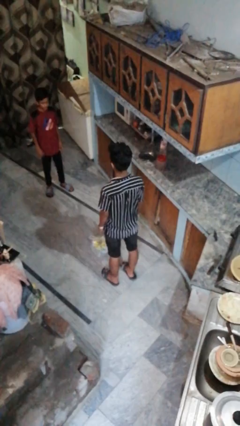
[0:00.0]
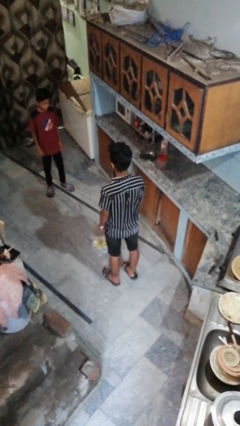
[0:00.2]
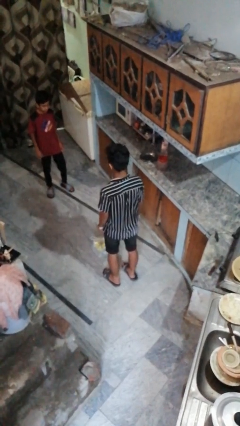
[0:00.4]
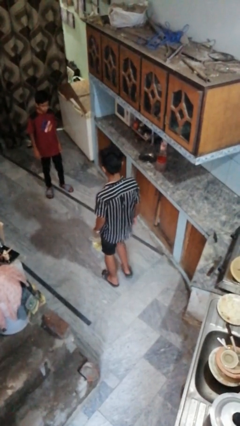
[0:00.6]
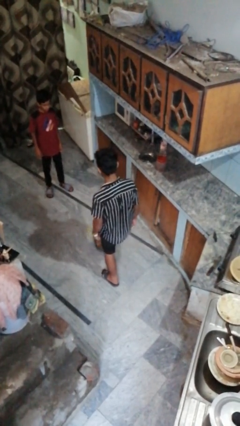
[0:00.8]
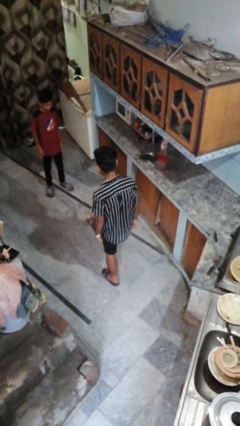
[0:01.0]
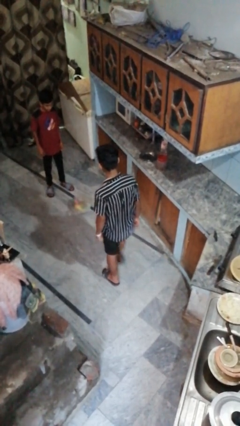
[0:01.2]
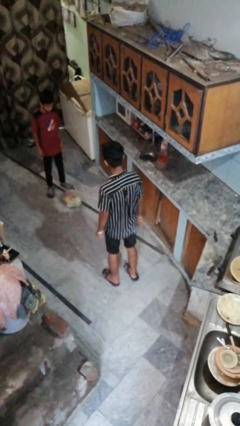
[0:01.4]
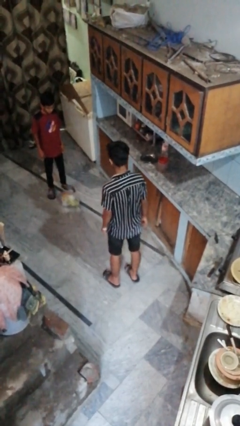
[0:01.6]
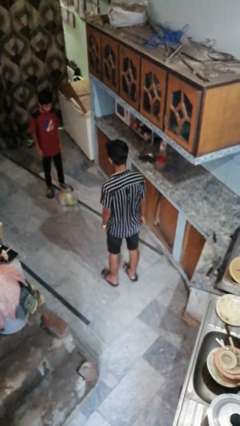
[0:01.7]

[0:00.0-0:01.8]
person kicks object to person

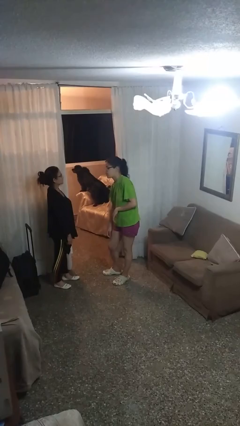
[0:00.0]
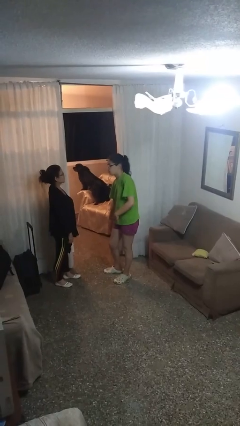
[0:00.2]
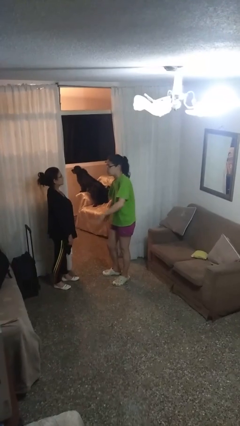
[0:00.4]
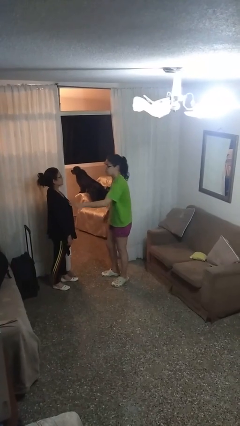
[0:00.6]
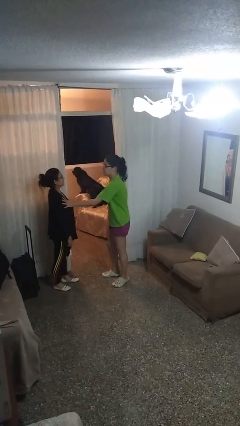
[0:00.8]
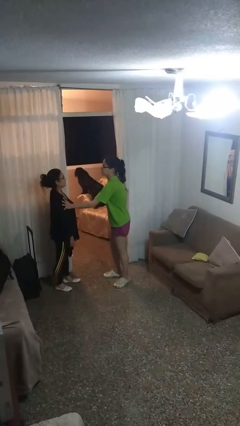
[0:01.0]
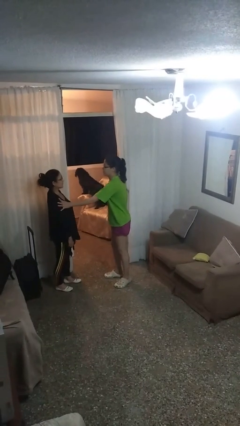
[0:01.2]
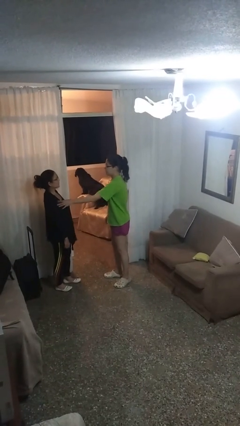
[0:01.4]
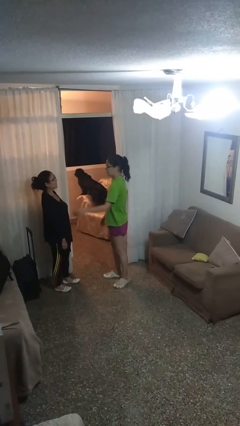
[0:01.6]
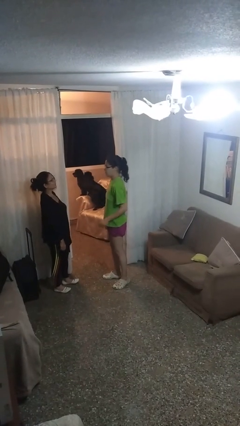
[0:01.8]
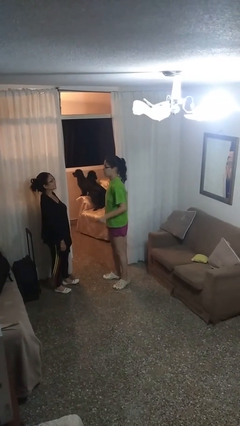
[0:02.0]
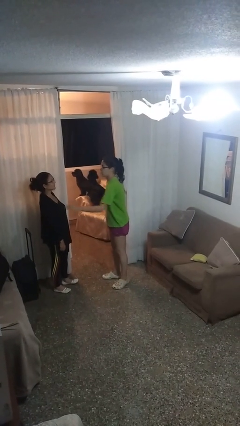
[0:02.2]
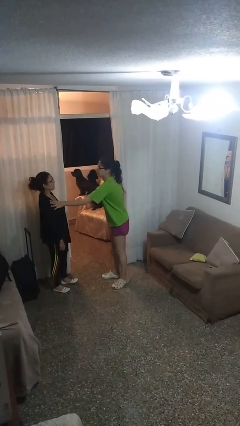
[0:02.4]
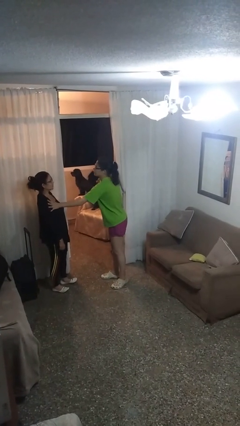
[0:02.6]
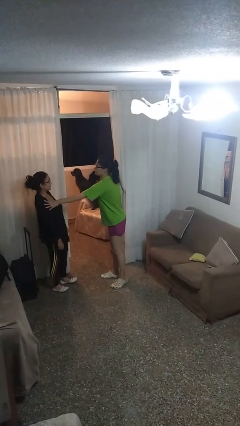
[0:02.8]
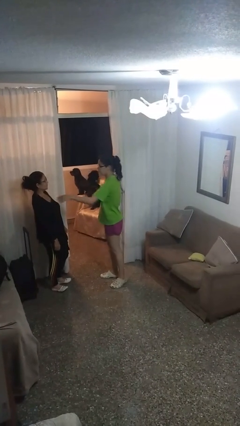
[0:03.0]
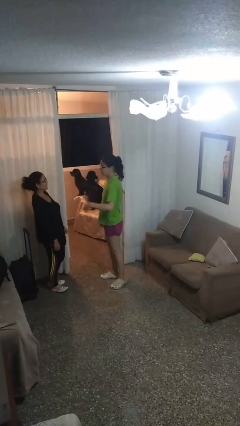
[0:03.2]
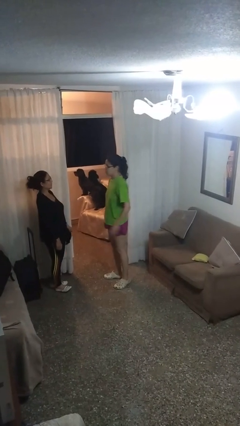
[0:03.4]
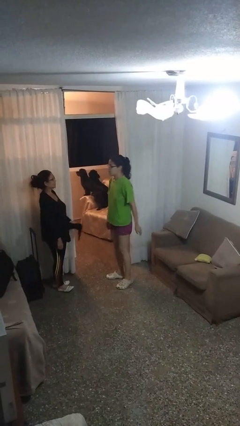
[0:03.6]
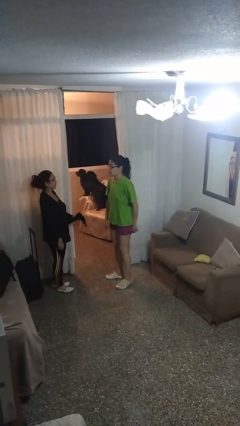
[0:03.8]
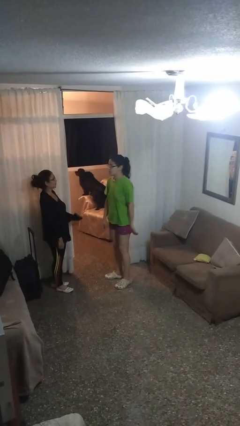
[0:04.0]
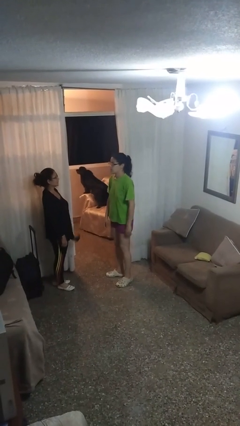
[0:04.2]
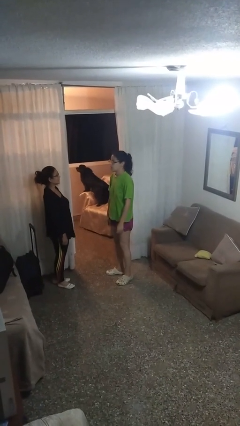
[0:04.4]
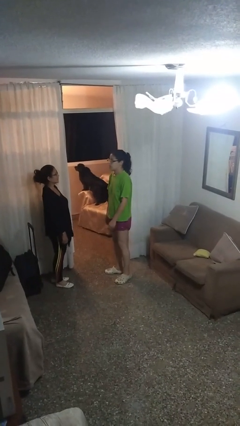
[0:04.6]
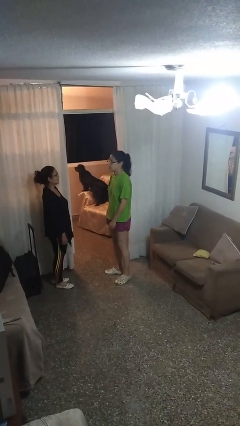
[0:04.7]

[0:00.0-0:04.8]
person shoves person

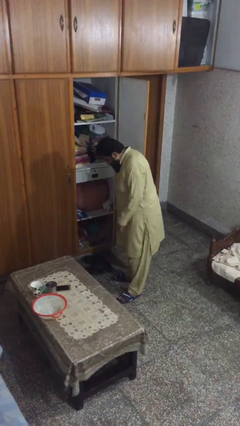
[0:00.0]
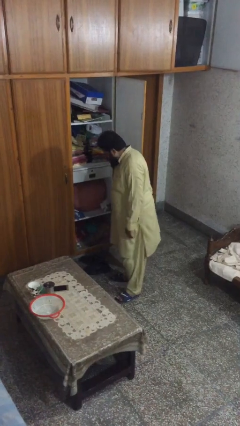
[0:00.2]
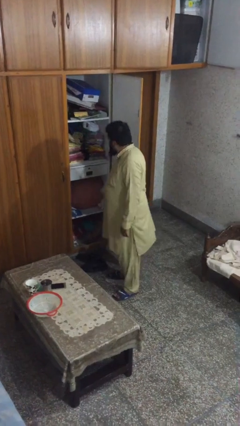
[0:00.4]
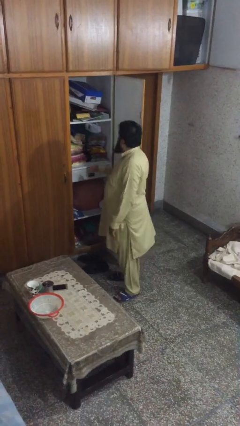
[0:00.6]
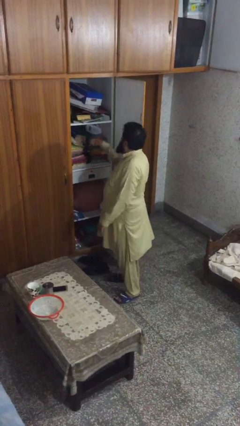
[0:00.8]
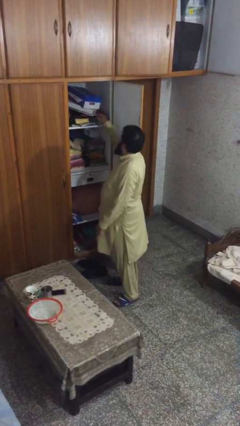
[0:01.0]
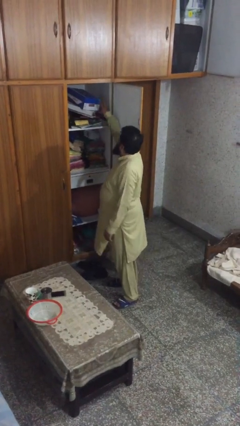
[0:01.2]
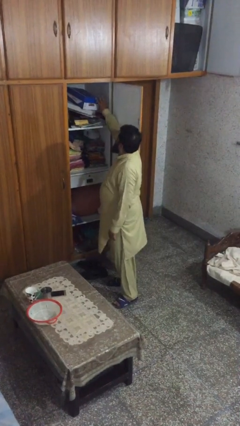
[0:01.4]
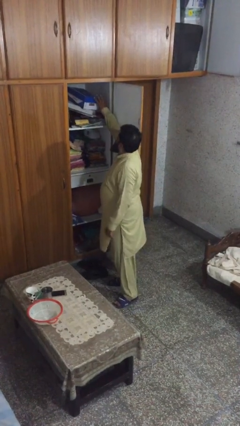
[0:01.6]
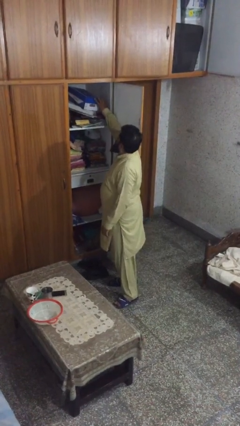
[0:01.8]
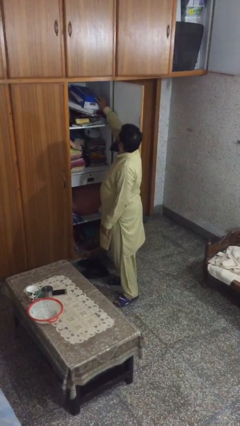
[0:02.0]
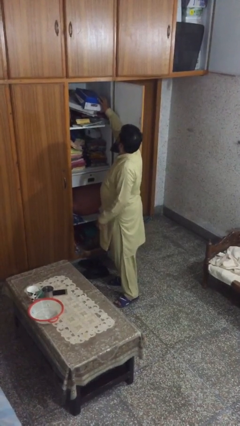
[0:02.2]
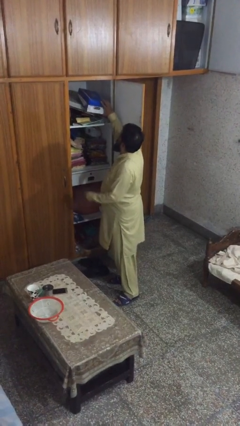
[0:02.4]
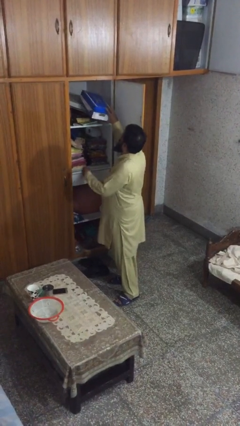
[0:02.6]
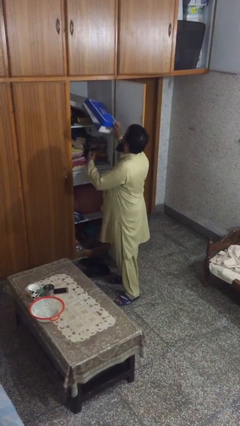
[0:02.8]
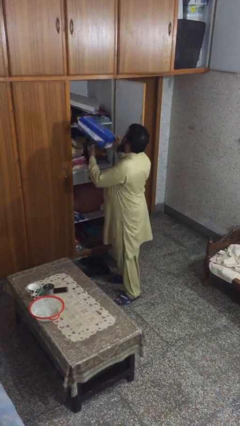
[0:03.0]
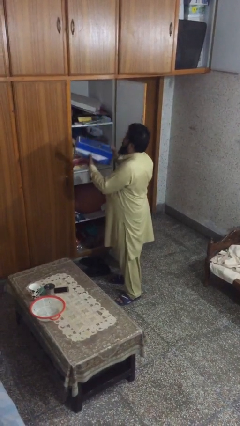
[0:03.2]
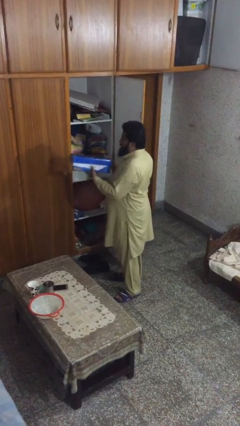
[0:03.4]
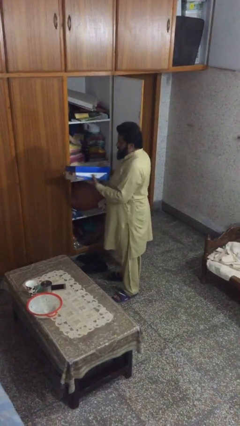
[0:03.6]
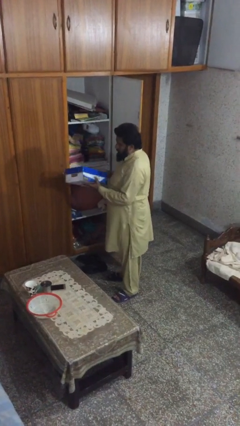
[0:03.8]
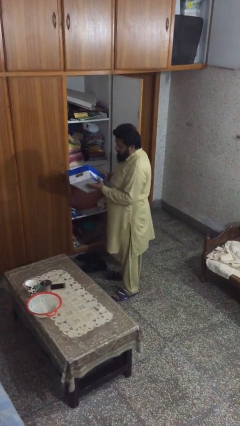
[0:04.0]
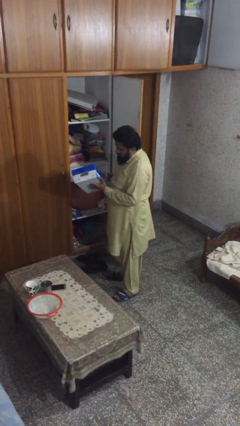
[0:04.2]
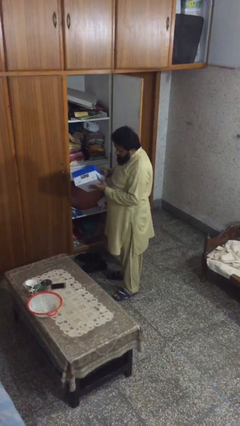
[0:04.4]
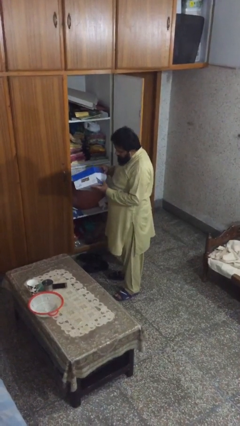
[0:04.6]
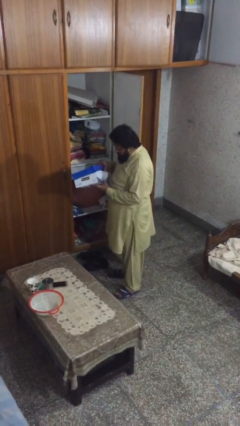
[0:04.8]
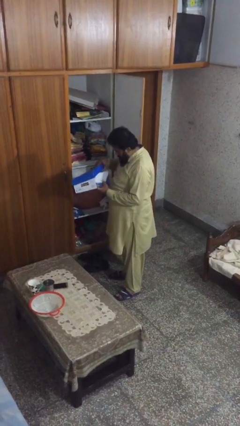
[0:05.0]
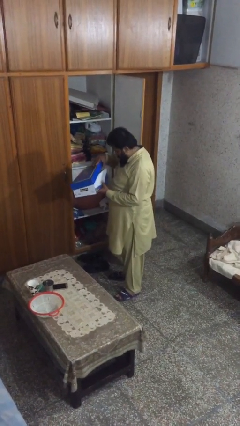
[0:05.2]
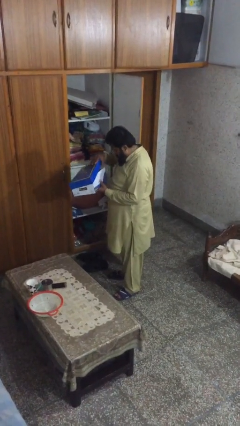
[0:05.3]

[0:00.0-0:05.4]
person picks up object from shelf

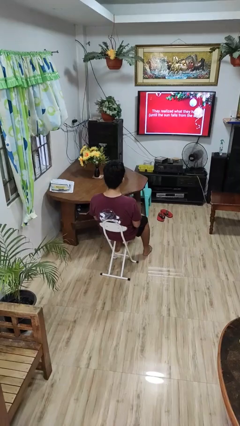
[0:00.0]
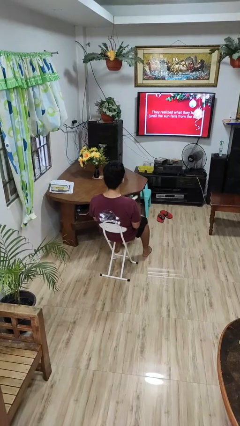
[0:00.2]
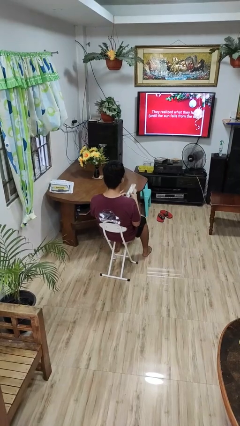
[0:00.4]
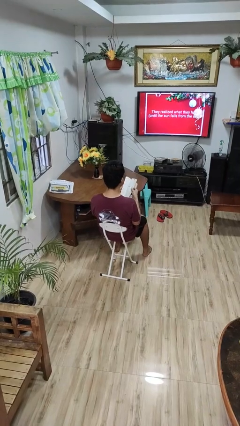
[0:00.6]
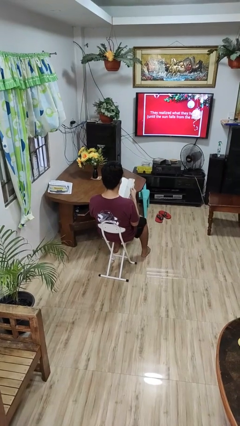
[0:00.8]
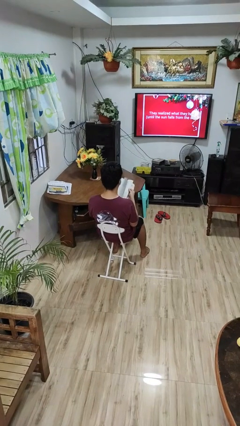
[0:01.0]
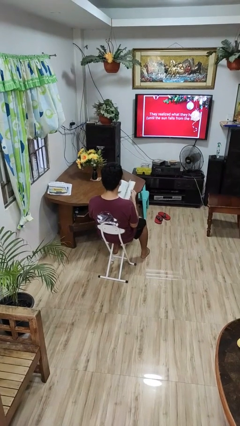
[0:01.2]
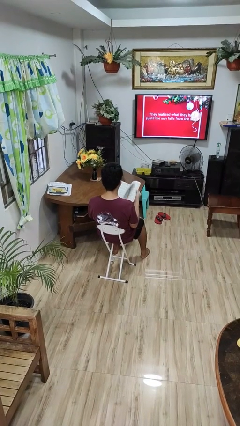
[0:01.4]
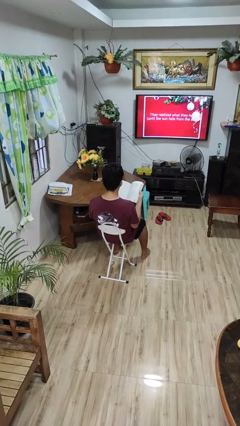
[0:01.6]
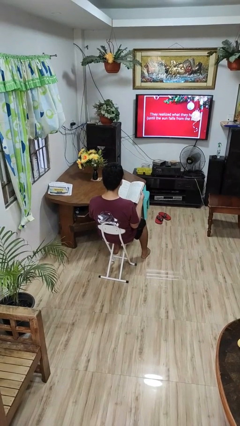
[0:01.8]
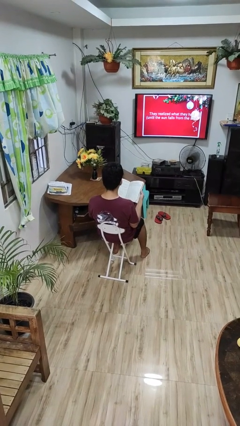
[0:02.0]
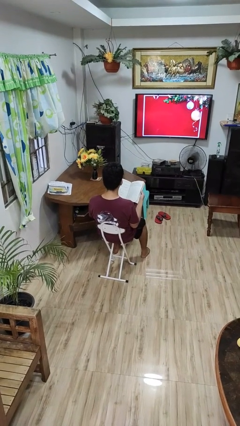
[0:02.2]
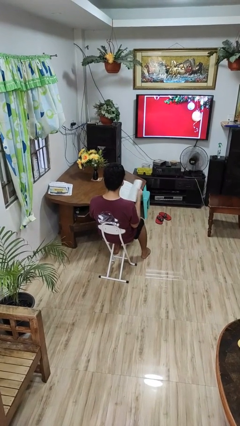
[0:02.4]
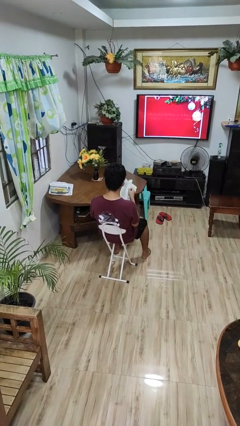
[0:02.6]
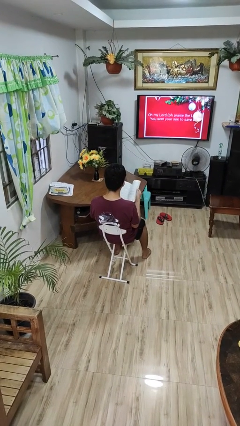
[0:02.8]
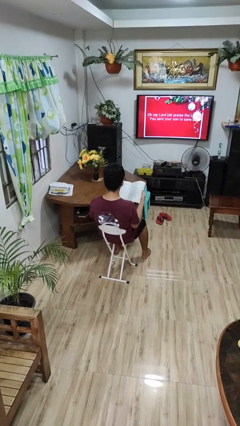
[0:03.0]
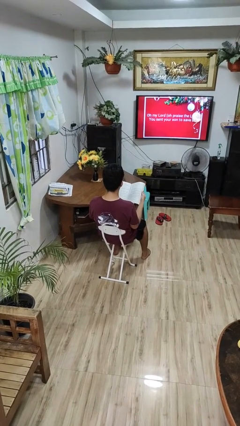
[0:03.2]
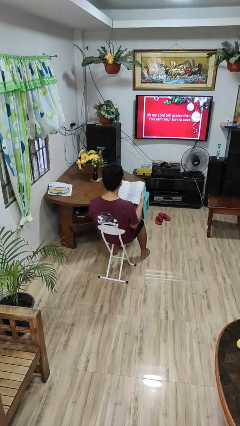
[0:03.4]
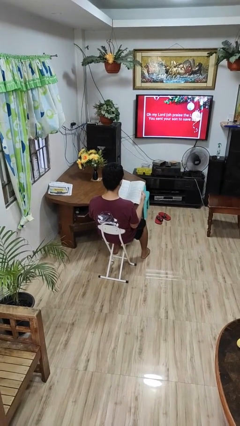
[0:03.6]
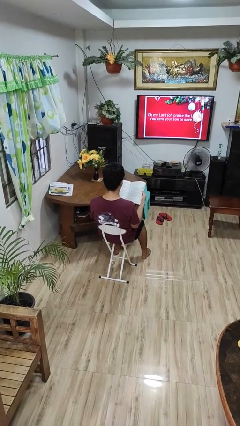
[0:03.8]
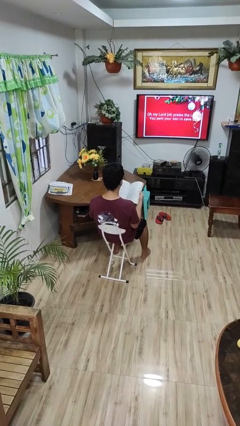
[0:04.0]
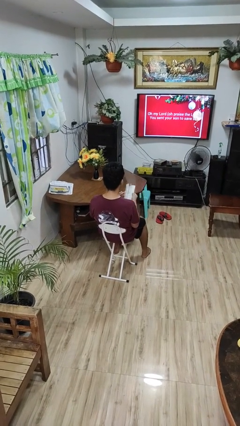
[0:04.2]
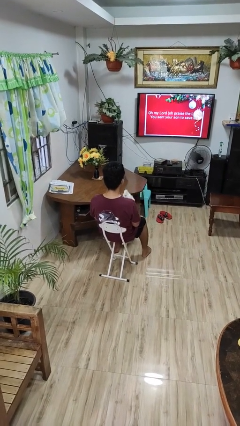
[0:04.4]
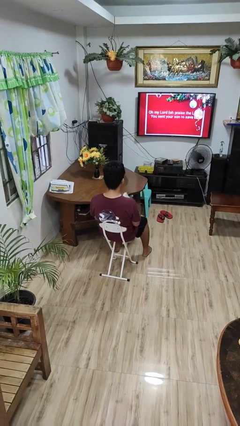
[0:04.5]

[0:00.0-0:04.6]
person reads book

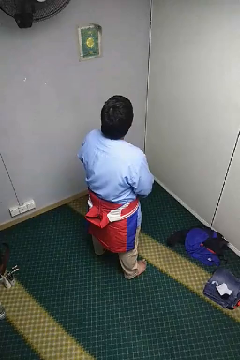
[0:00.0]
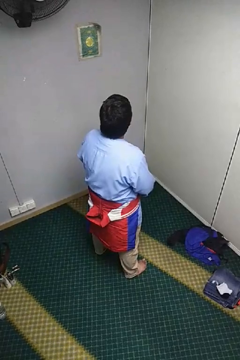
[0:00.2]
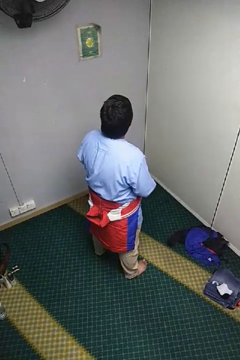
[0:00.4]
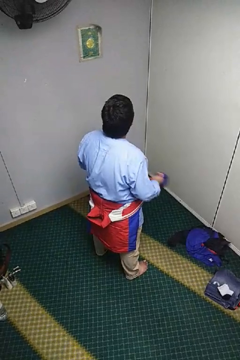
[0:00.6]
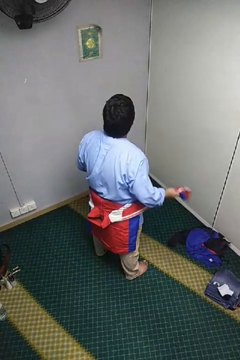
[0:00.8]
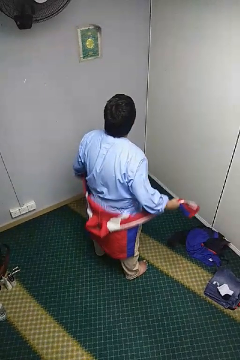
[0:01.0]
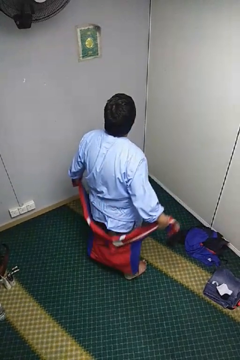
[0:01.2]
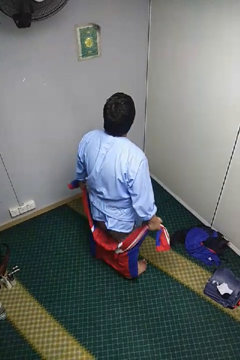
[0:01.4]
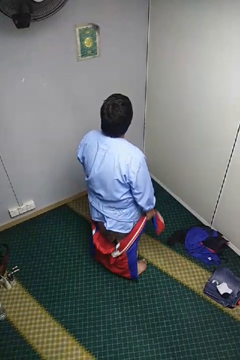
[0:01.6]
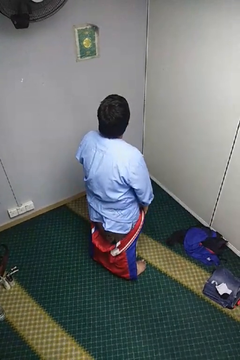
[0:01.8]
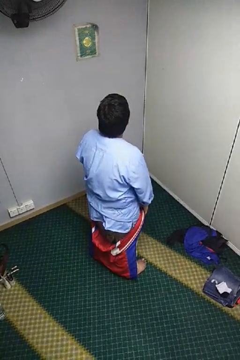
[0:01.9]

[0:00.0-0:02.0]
person unties jacket around waist
